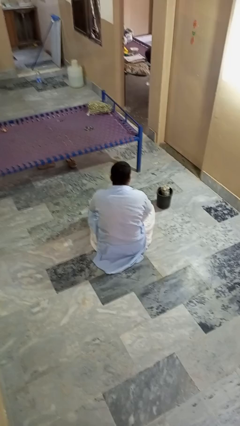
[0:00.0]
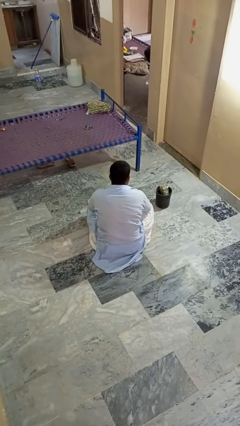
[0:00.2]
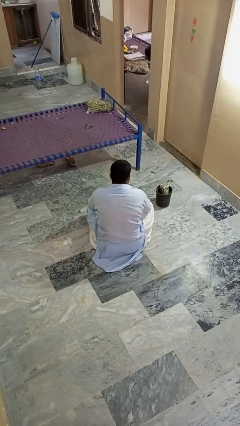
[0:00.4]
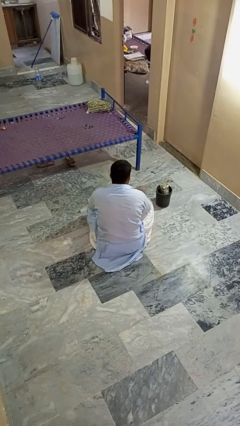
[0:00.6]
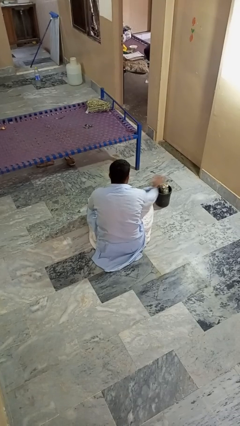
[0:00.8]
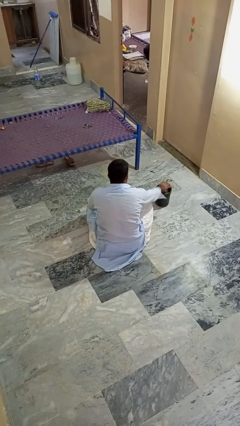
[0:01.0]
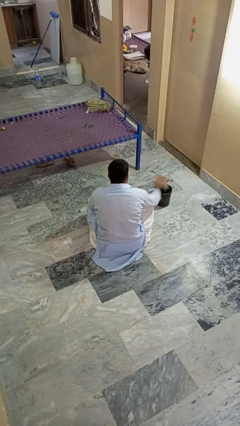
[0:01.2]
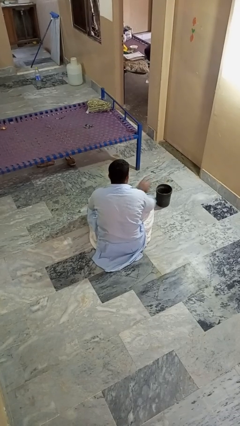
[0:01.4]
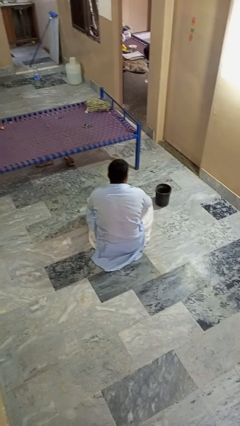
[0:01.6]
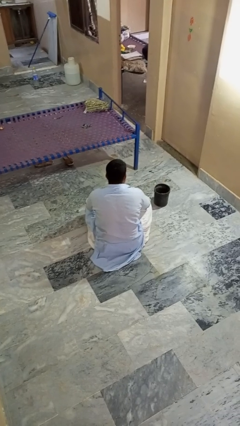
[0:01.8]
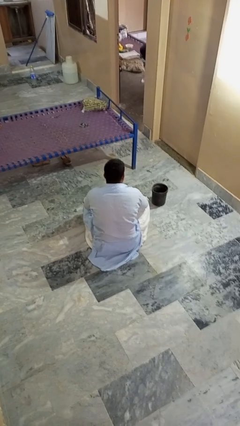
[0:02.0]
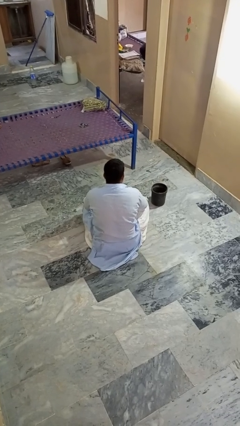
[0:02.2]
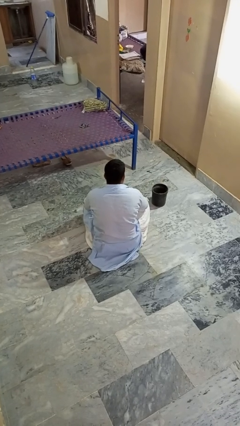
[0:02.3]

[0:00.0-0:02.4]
person takes object from basket

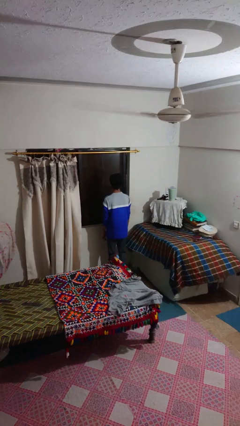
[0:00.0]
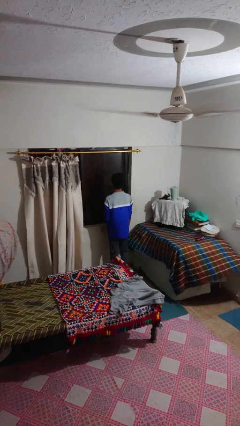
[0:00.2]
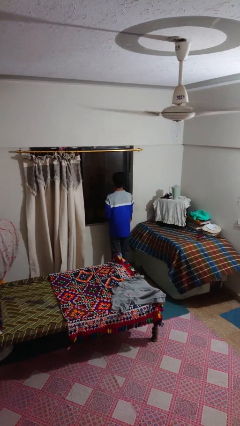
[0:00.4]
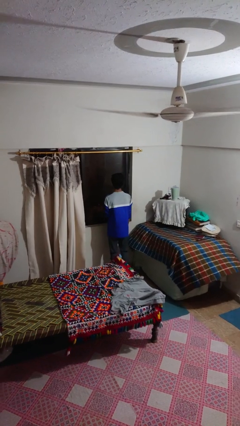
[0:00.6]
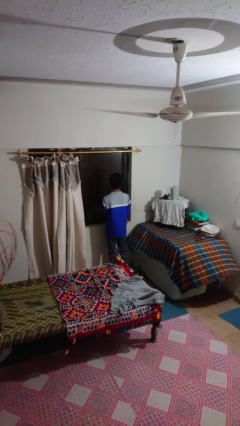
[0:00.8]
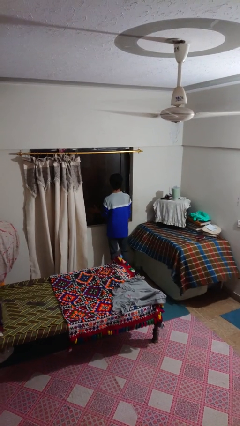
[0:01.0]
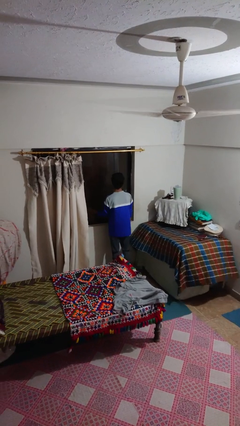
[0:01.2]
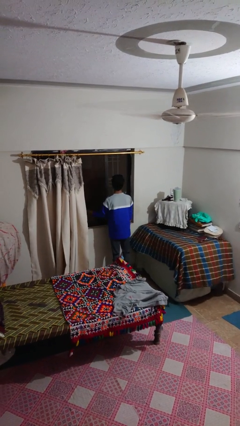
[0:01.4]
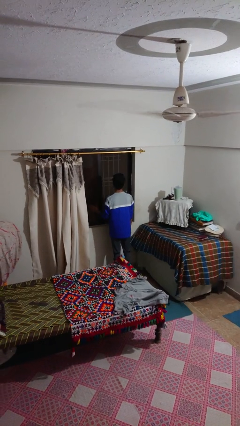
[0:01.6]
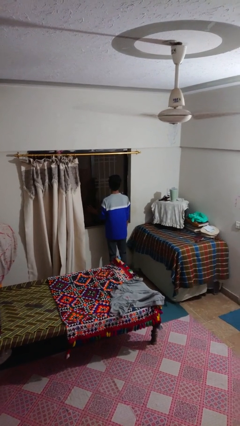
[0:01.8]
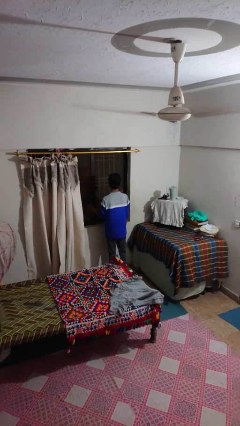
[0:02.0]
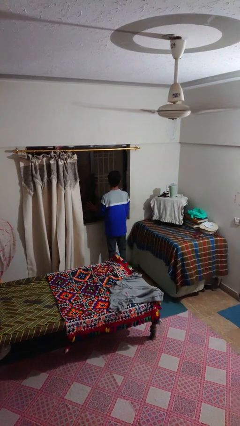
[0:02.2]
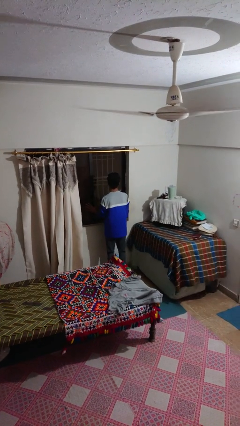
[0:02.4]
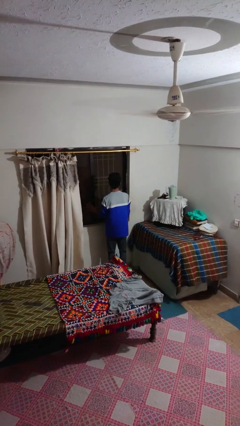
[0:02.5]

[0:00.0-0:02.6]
person opens home window

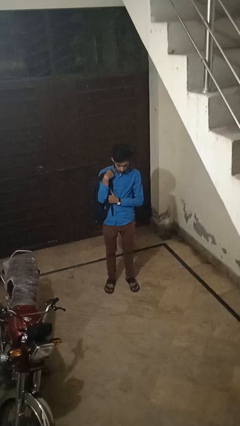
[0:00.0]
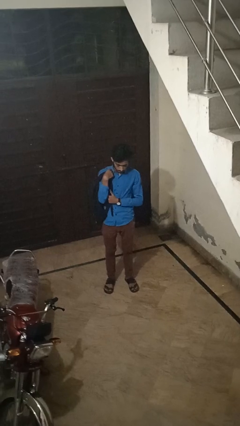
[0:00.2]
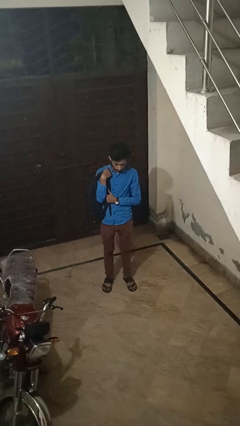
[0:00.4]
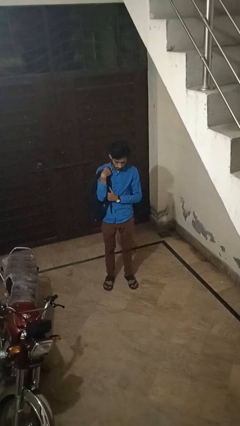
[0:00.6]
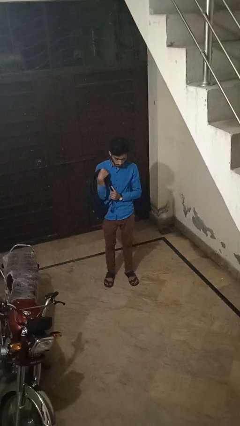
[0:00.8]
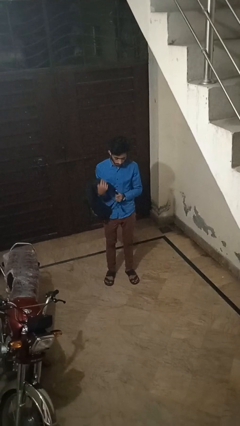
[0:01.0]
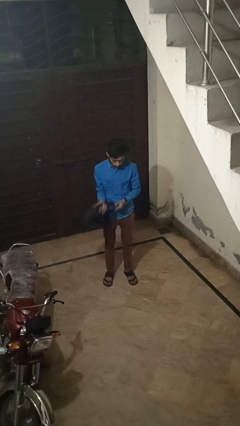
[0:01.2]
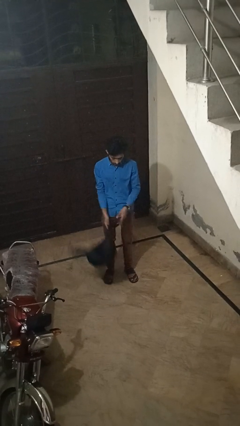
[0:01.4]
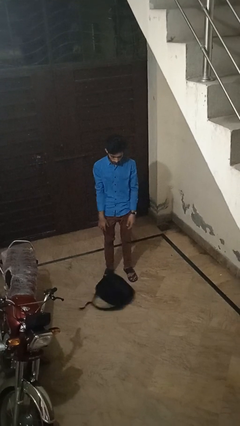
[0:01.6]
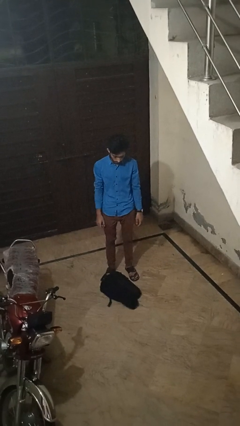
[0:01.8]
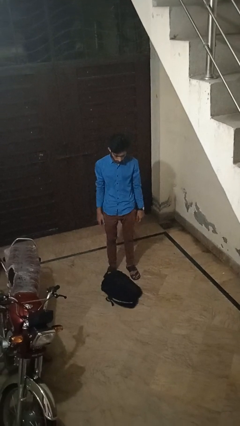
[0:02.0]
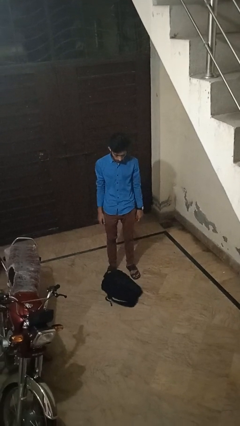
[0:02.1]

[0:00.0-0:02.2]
person drops object

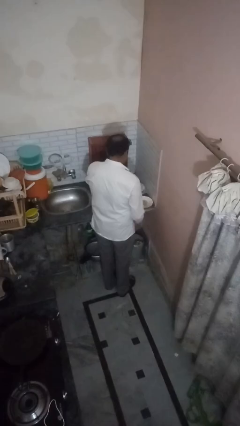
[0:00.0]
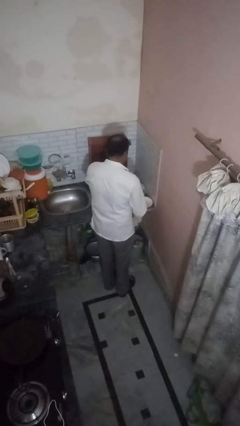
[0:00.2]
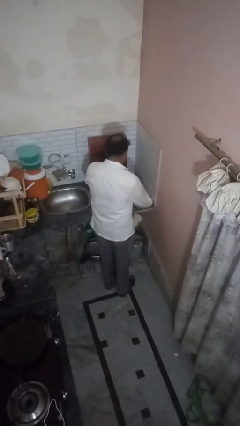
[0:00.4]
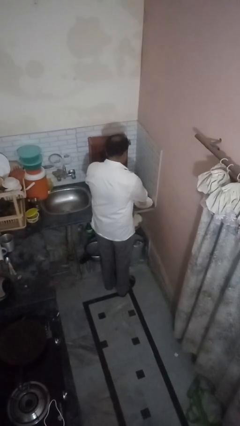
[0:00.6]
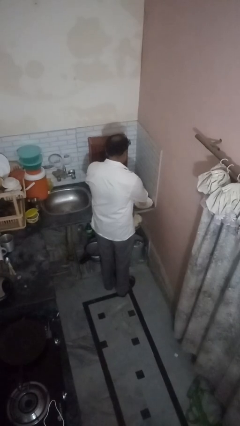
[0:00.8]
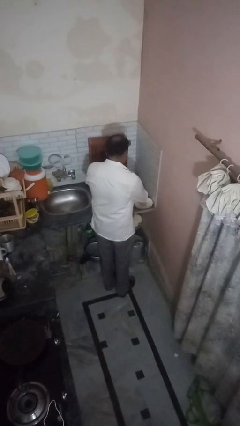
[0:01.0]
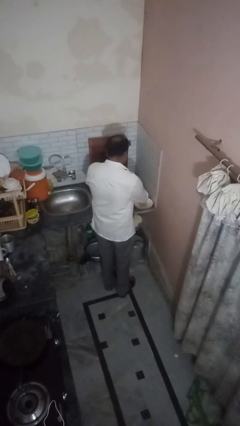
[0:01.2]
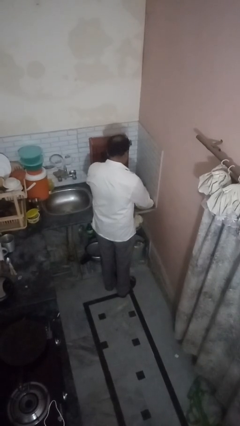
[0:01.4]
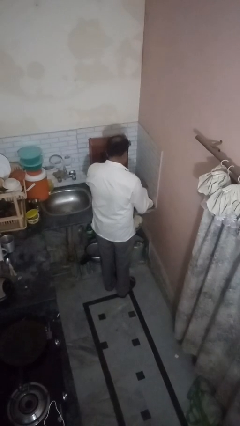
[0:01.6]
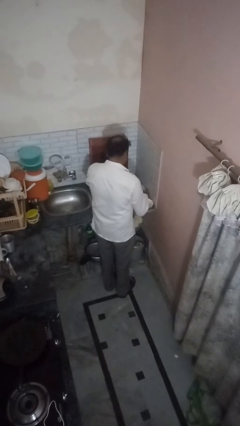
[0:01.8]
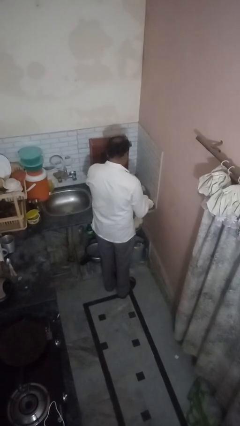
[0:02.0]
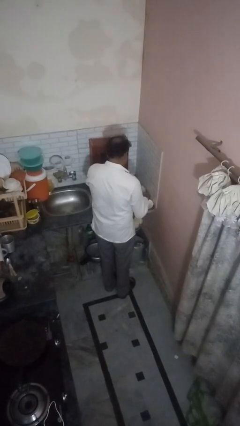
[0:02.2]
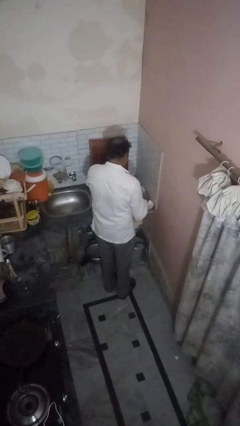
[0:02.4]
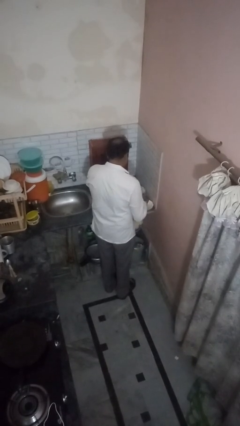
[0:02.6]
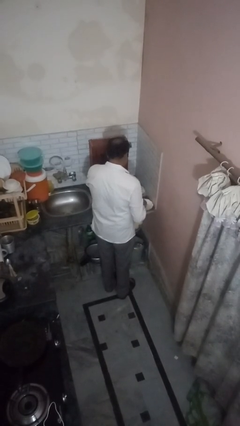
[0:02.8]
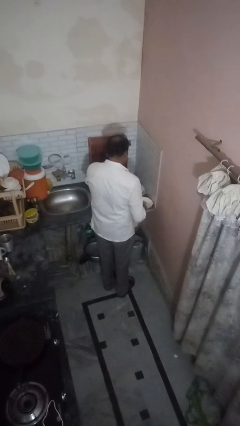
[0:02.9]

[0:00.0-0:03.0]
person pours into bowl

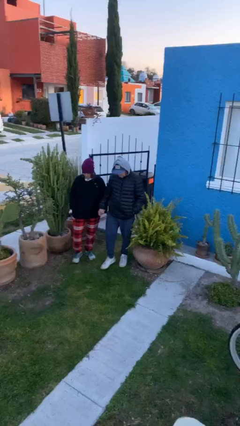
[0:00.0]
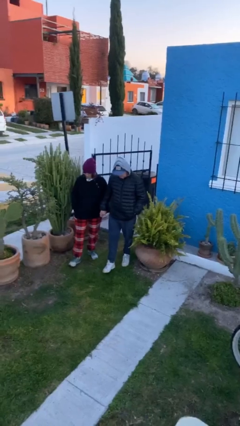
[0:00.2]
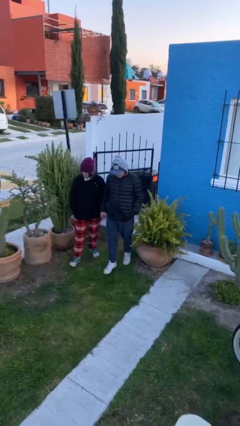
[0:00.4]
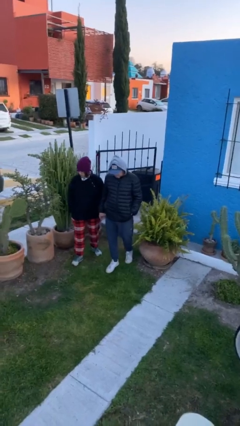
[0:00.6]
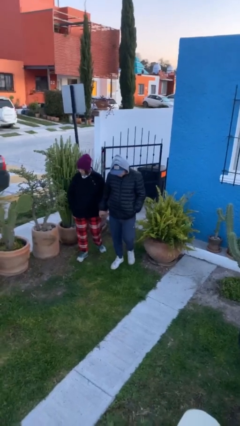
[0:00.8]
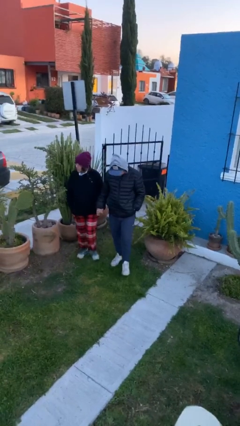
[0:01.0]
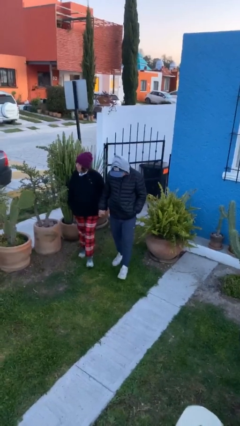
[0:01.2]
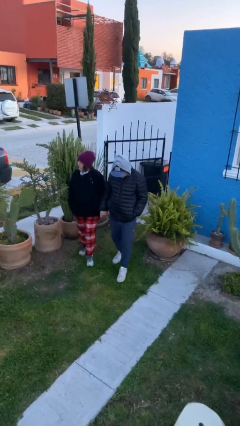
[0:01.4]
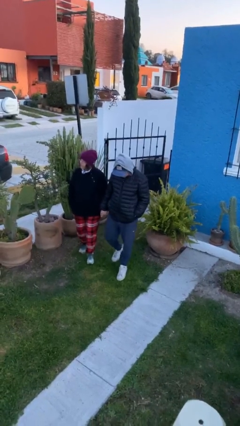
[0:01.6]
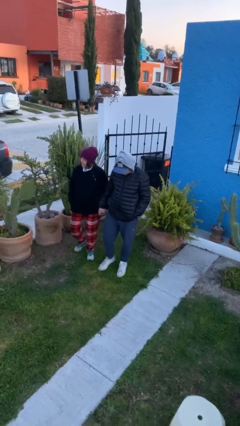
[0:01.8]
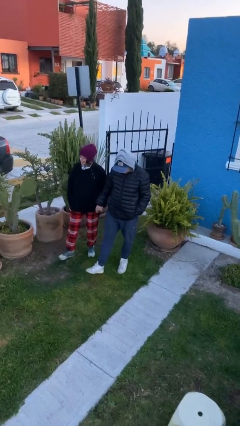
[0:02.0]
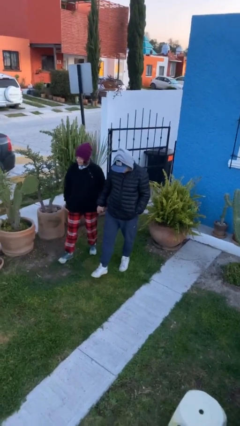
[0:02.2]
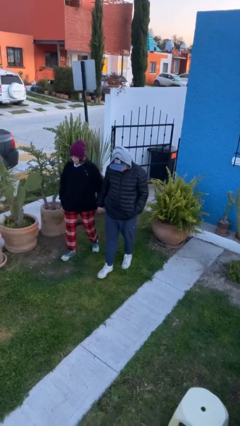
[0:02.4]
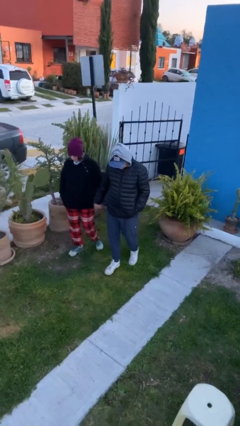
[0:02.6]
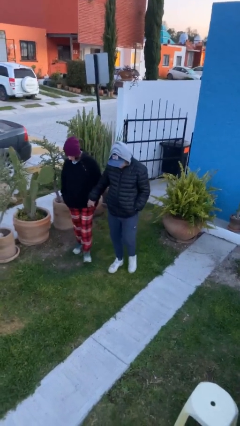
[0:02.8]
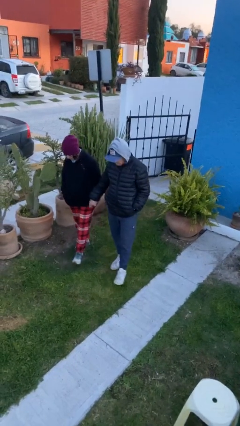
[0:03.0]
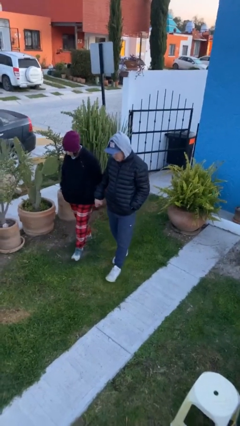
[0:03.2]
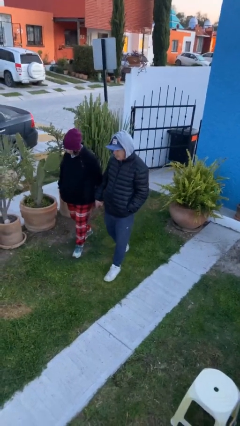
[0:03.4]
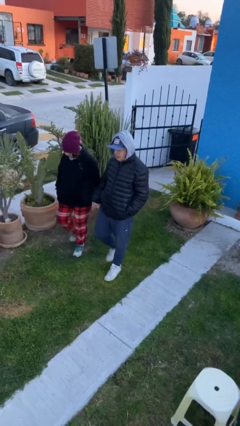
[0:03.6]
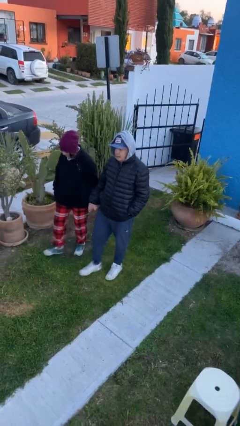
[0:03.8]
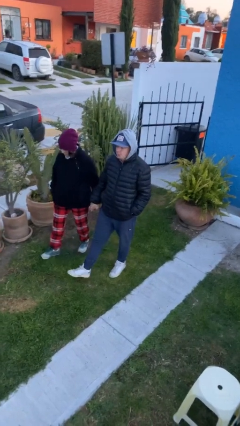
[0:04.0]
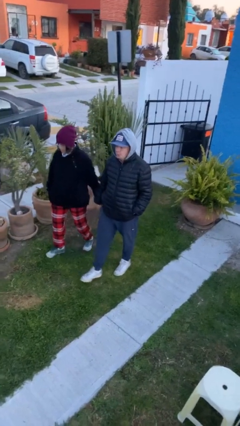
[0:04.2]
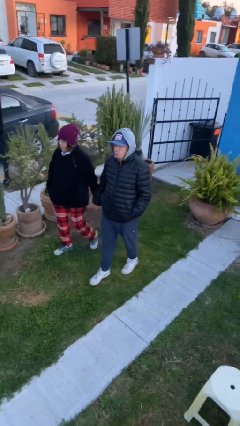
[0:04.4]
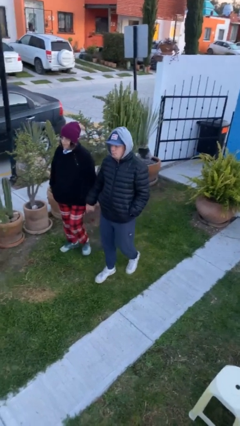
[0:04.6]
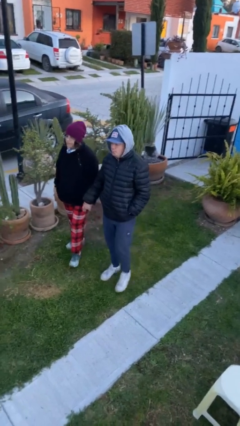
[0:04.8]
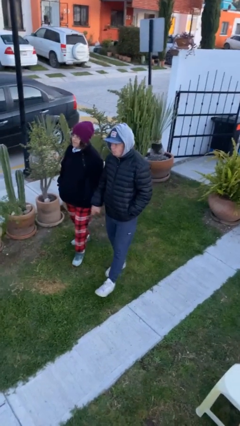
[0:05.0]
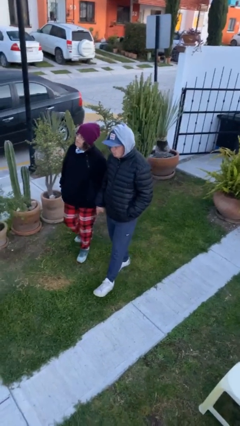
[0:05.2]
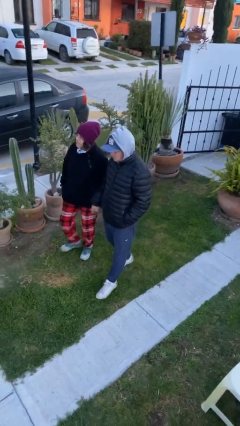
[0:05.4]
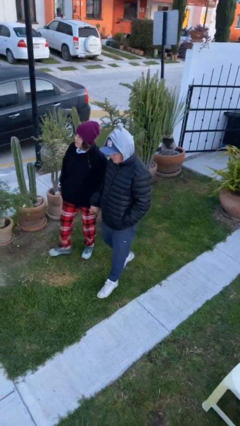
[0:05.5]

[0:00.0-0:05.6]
person holds hand

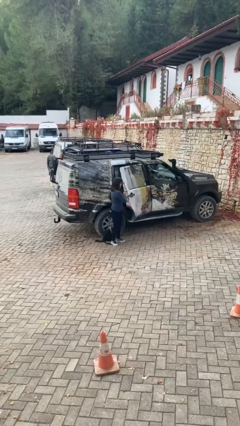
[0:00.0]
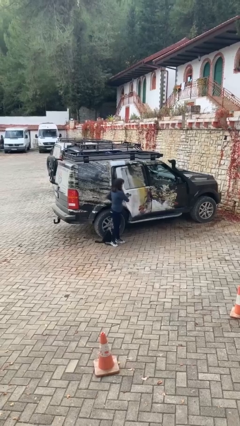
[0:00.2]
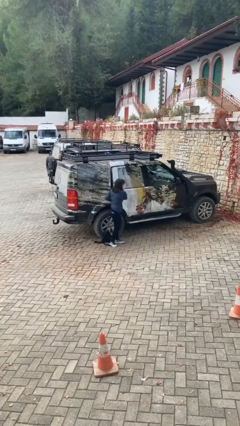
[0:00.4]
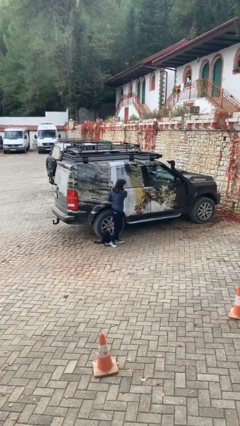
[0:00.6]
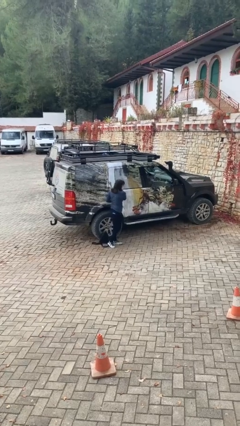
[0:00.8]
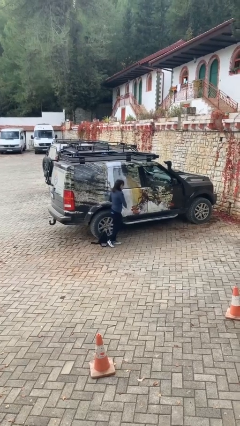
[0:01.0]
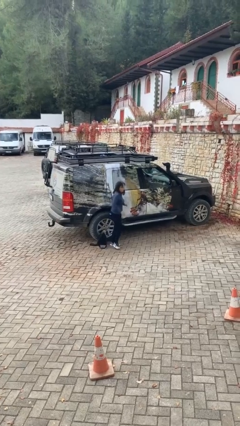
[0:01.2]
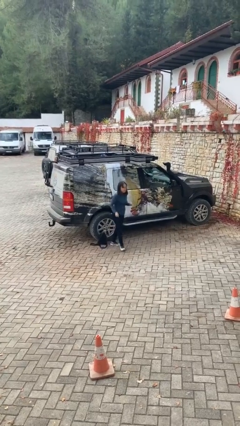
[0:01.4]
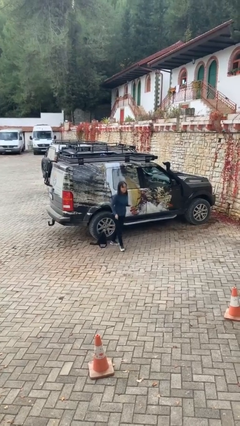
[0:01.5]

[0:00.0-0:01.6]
person closes car door
